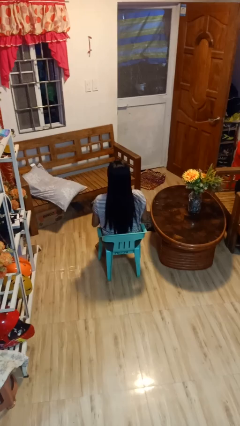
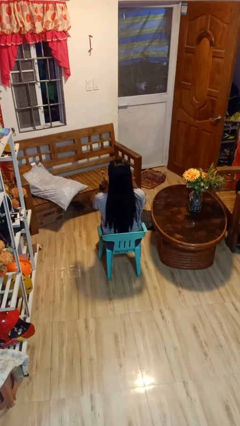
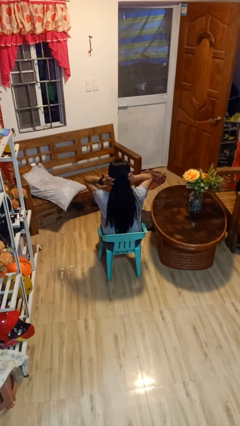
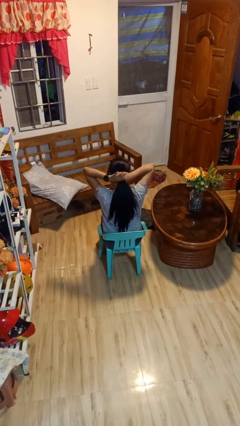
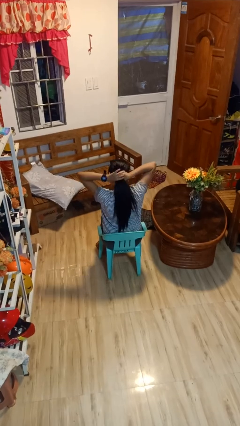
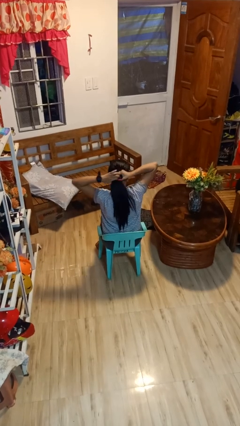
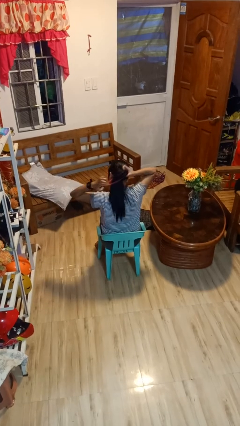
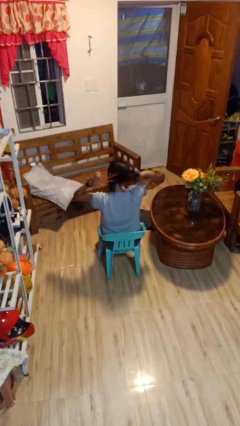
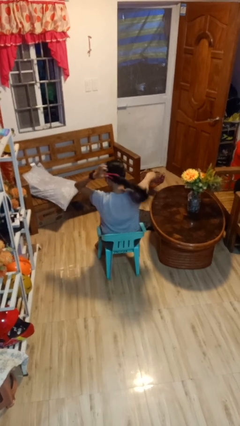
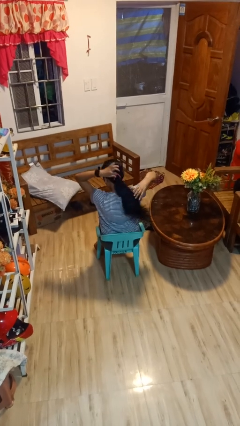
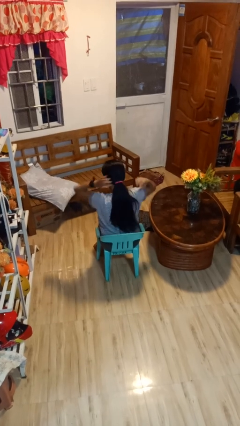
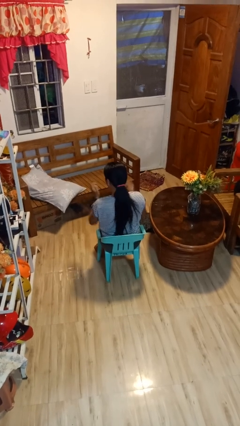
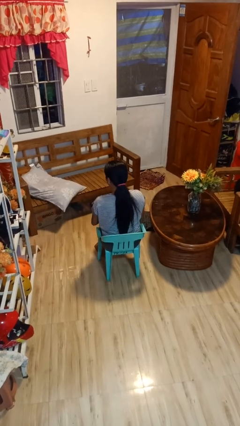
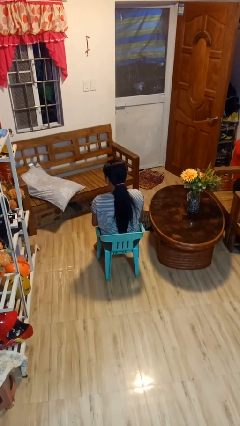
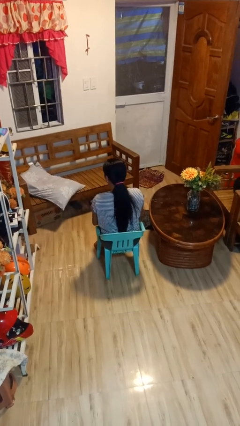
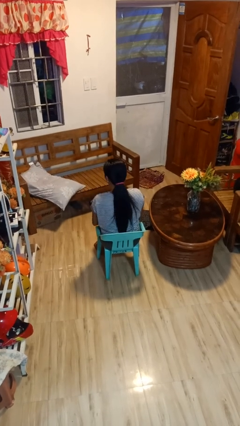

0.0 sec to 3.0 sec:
person puts hair in ponytail

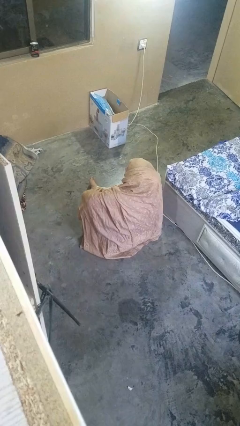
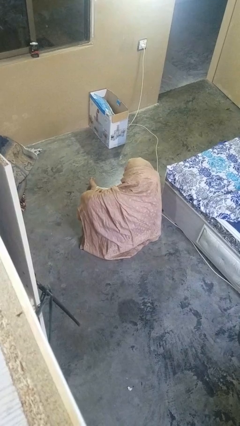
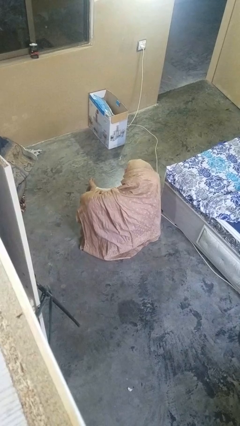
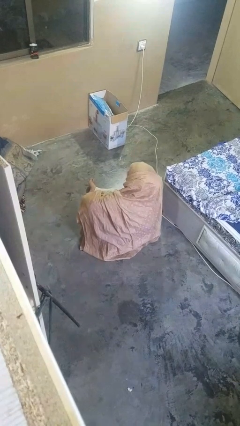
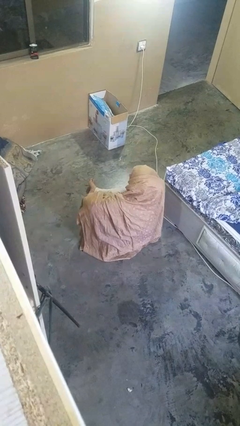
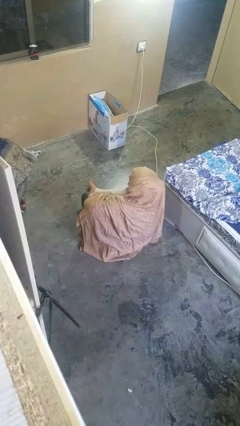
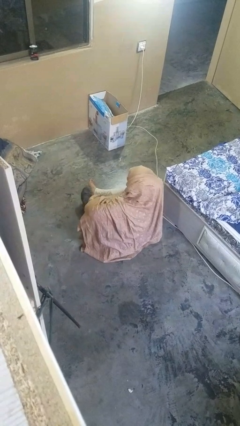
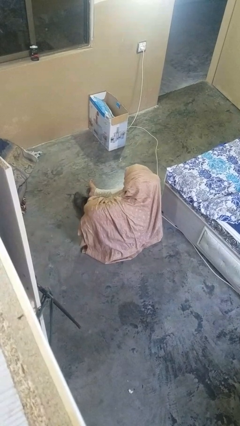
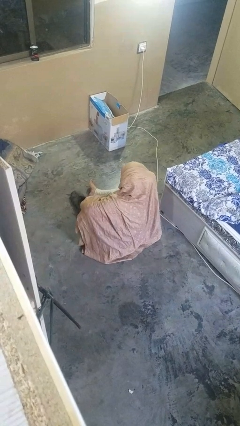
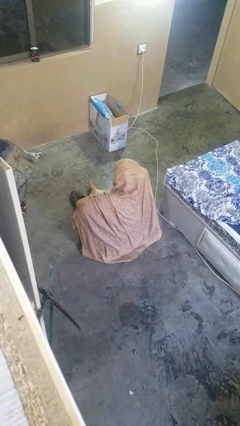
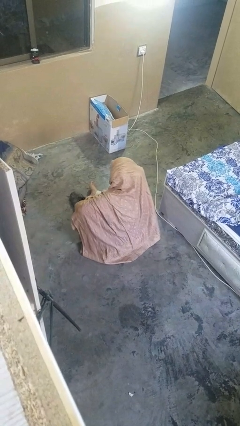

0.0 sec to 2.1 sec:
person takes off shoes

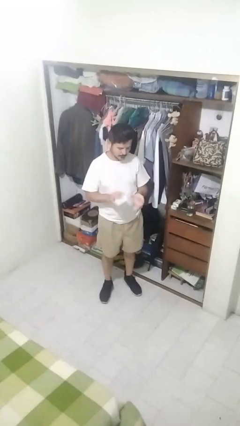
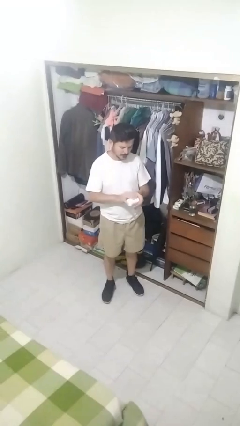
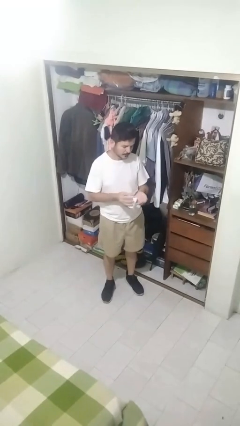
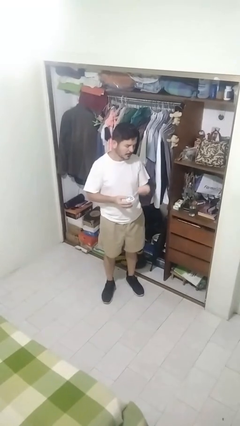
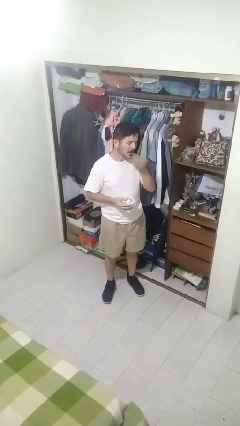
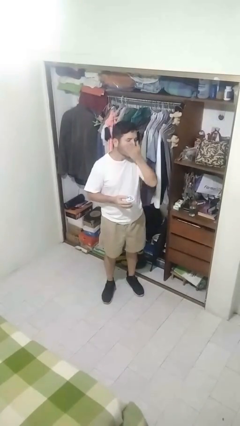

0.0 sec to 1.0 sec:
person takes medicine pills

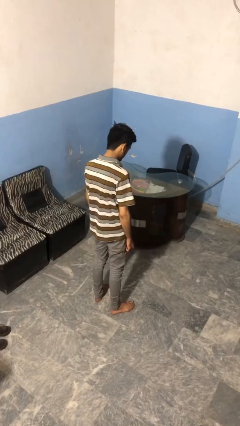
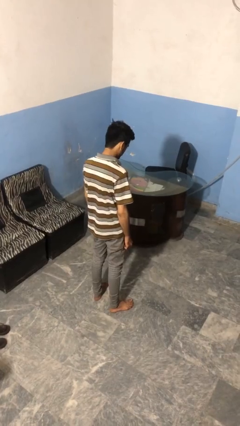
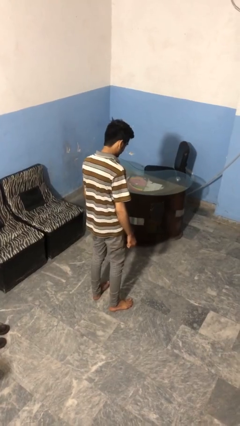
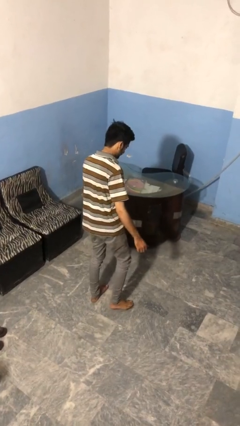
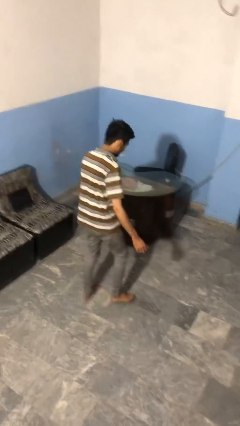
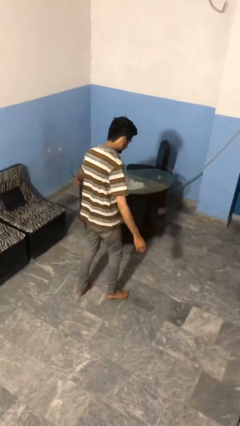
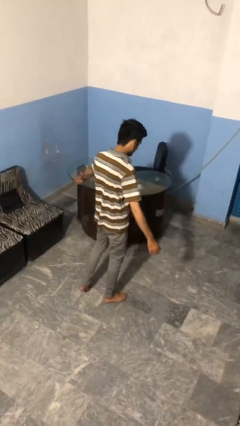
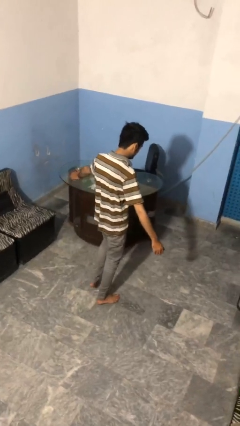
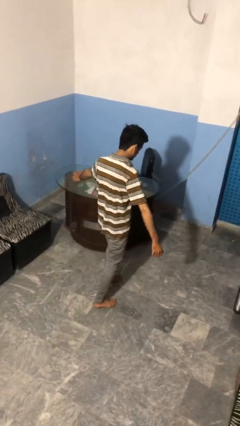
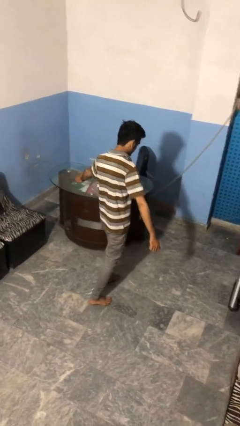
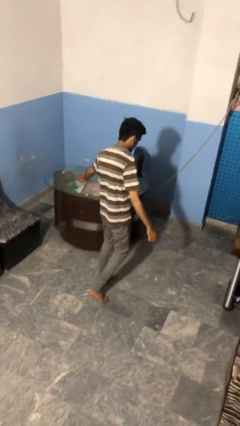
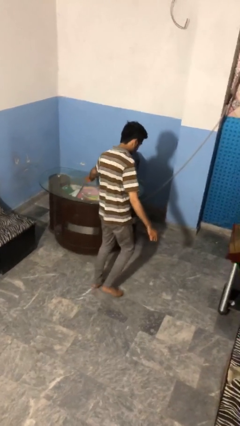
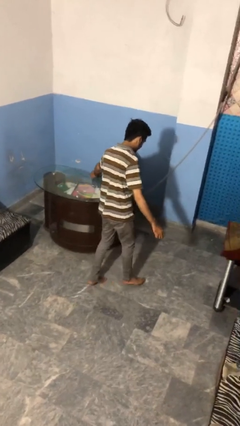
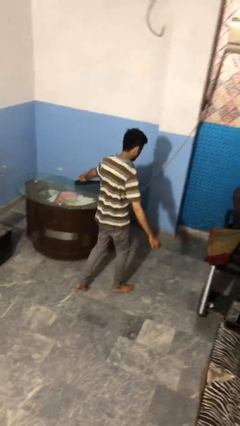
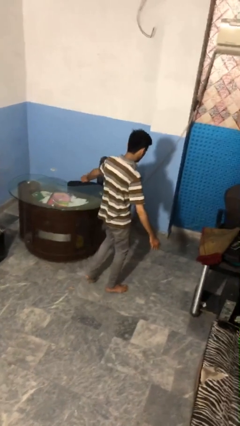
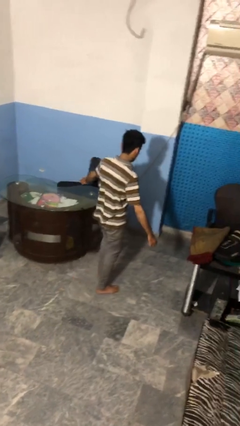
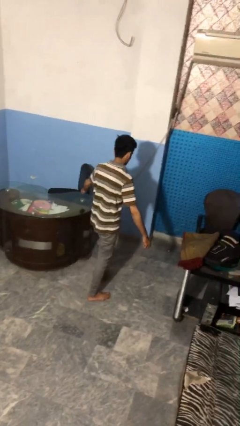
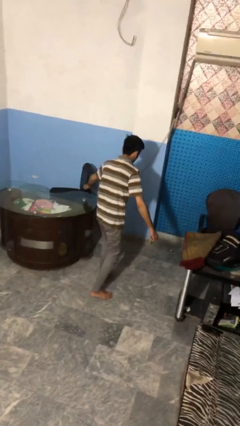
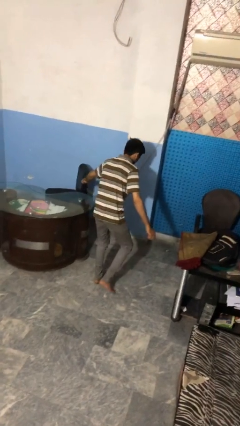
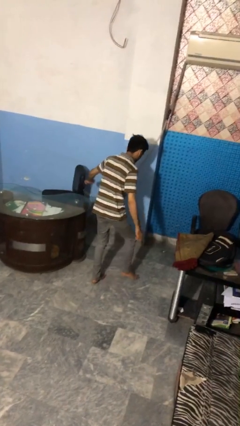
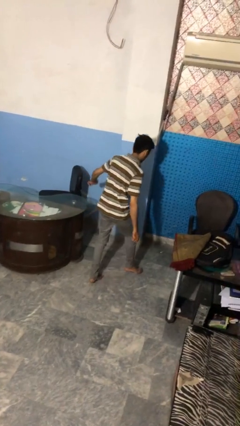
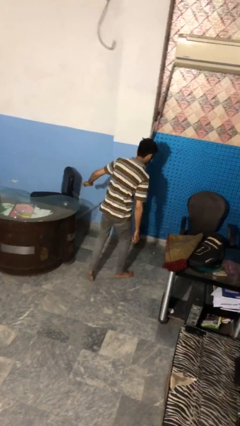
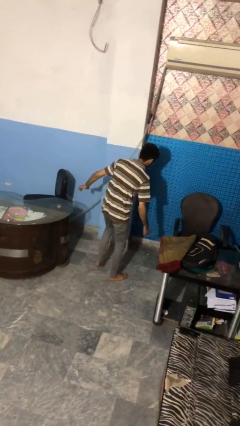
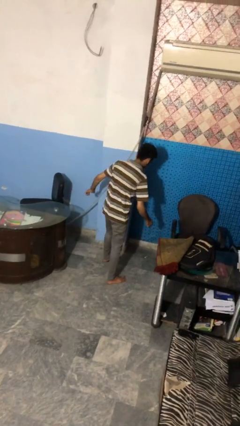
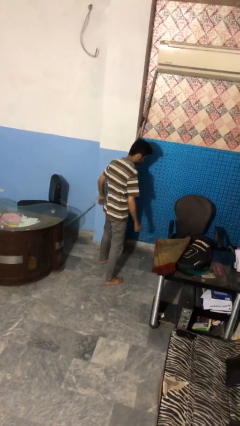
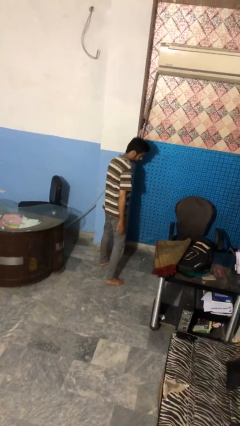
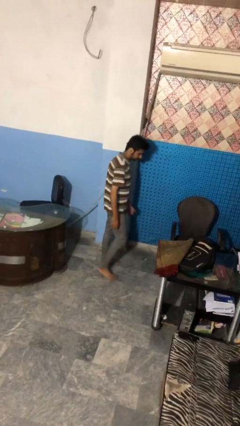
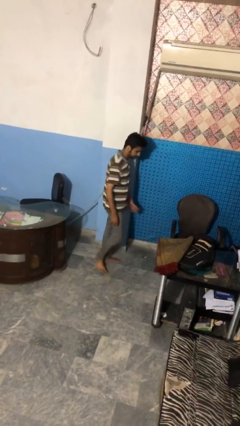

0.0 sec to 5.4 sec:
person walks tiptoe

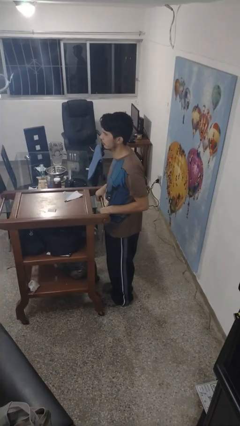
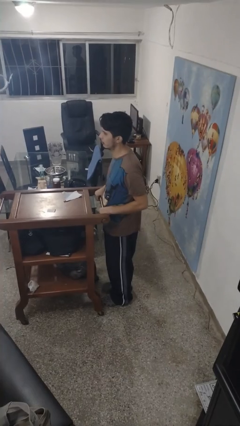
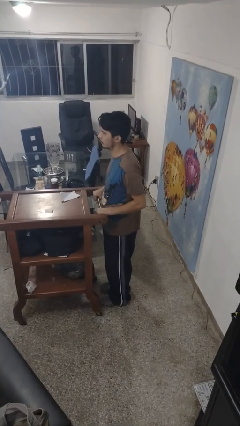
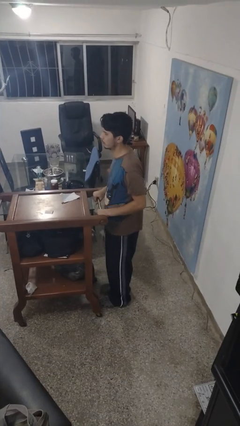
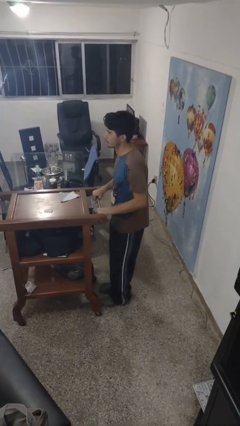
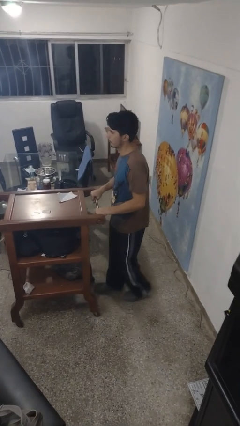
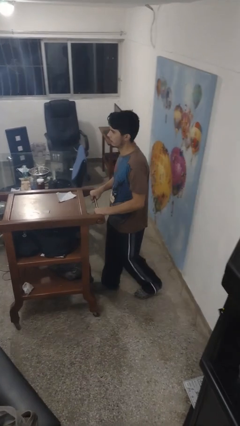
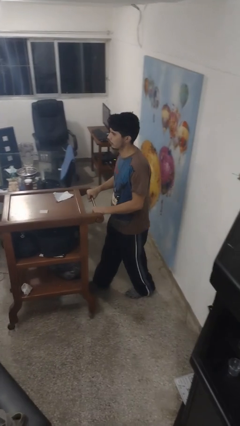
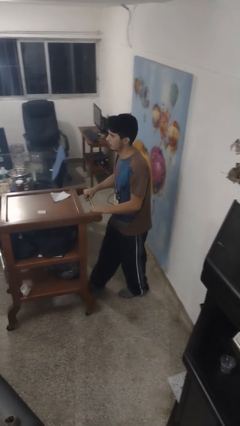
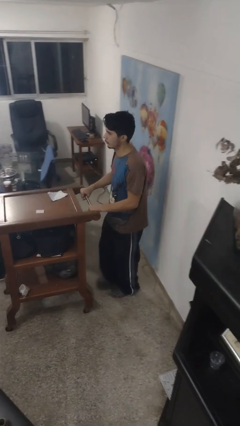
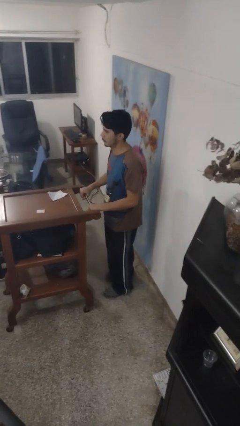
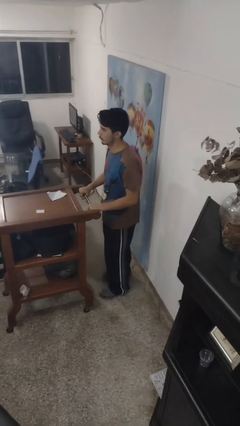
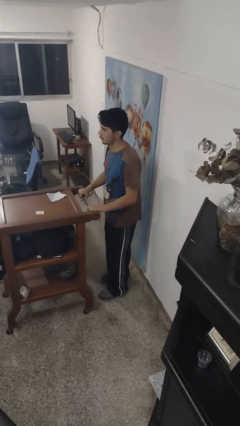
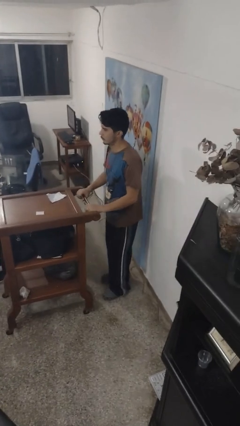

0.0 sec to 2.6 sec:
person pulls wheeled cart

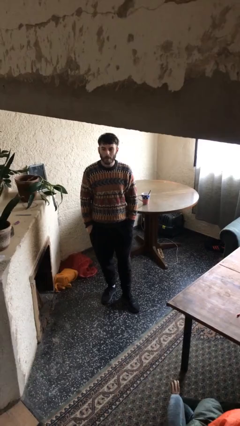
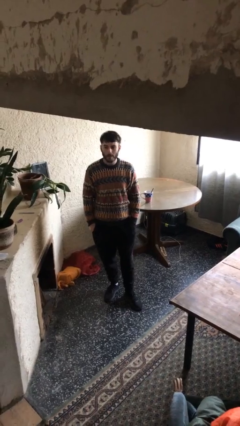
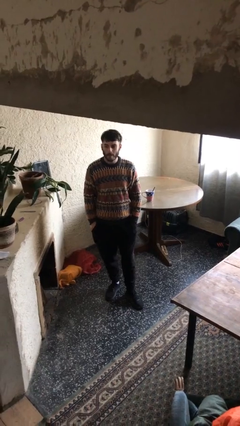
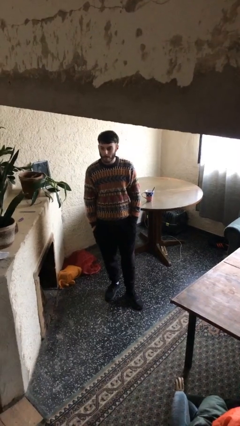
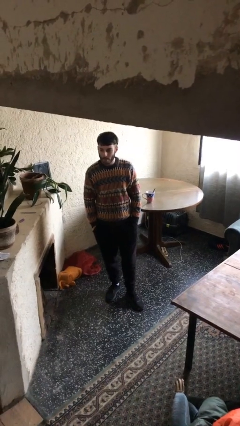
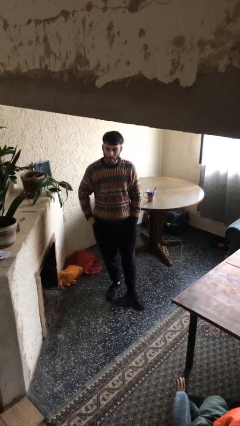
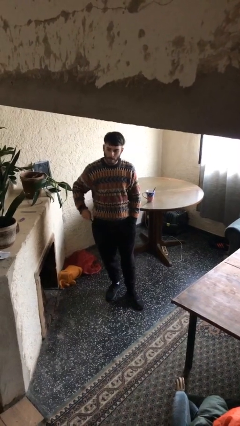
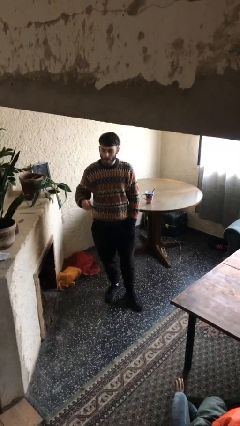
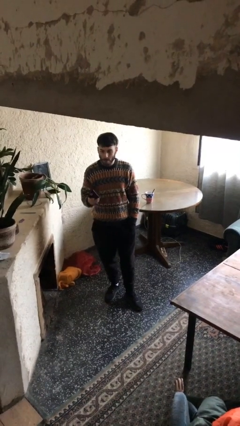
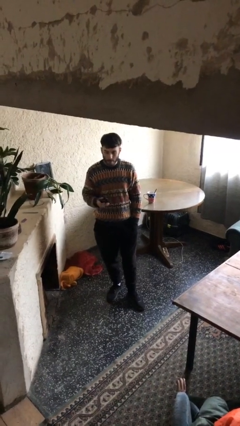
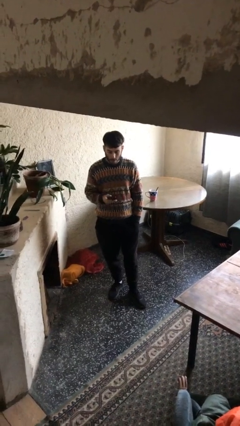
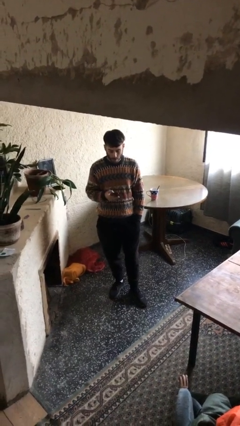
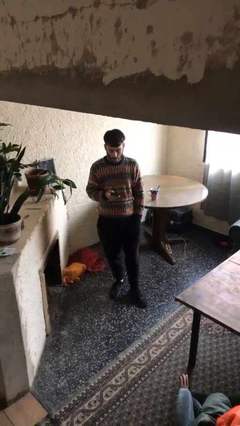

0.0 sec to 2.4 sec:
person takes phone from pocket

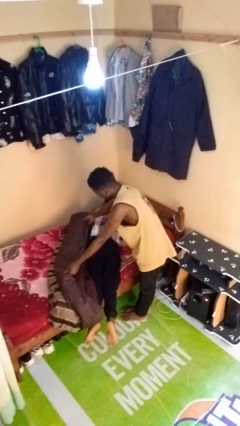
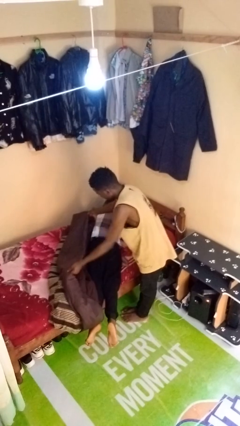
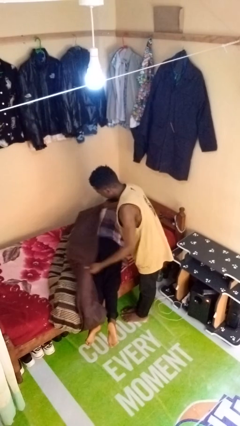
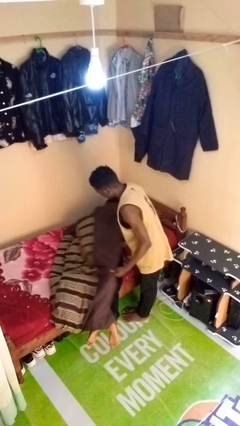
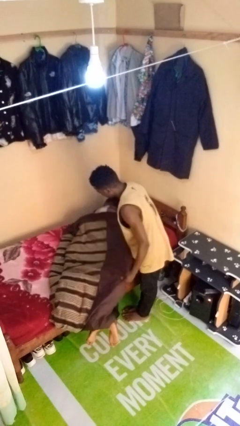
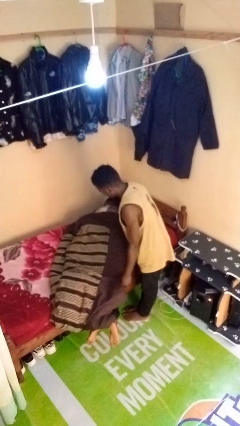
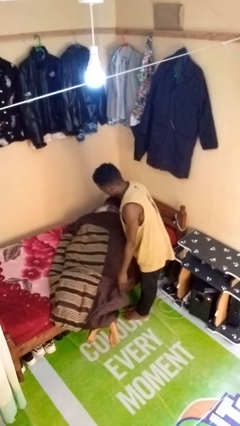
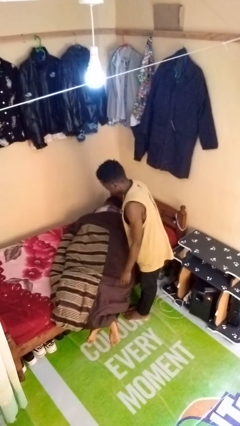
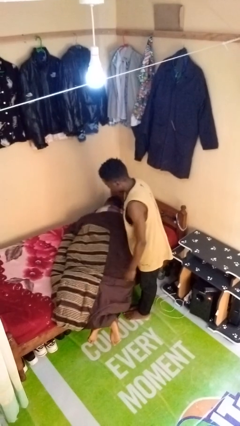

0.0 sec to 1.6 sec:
person covers friend with blanket
